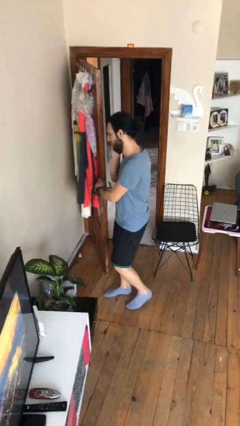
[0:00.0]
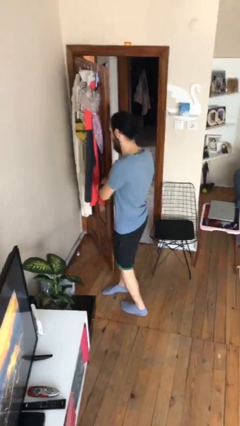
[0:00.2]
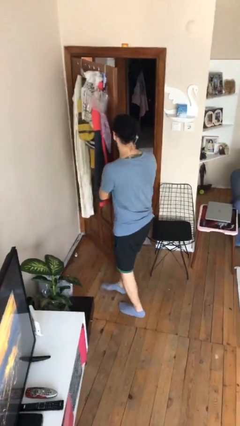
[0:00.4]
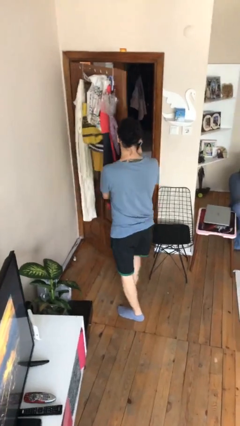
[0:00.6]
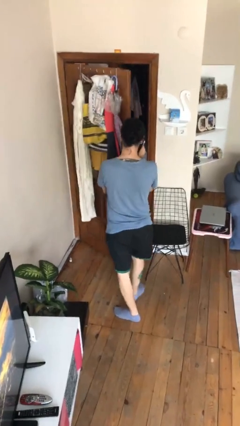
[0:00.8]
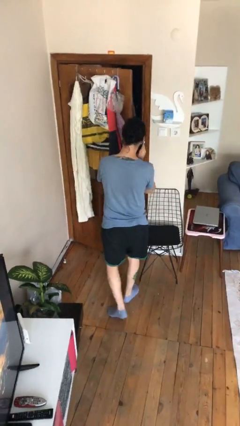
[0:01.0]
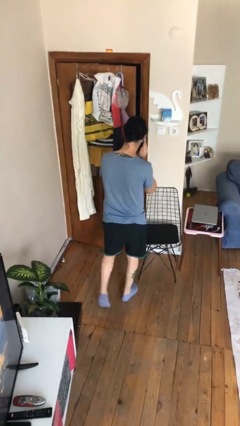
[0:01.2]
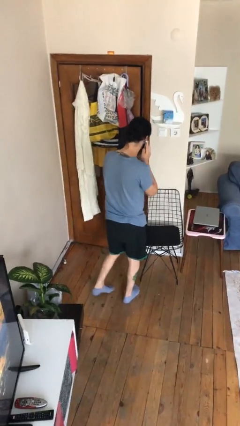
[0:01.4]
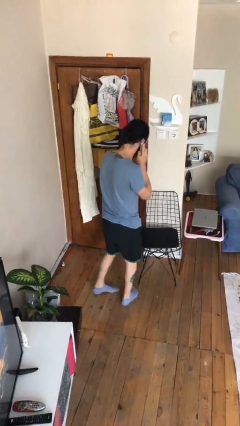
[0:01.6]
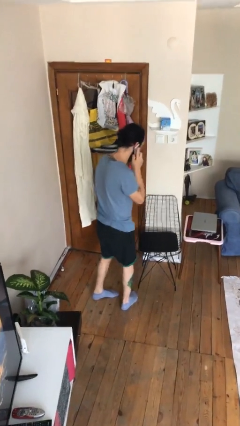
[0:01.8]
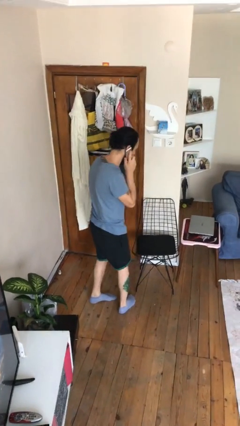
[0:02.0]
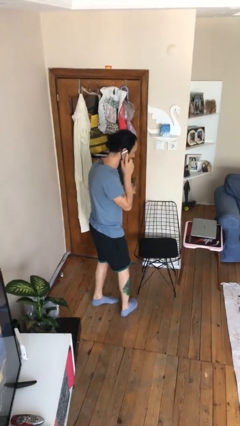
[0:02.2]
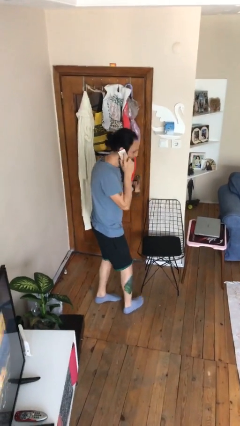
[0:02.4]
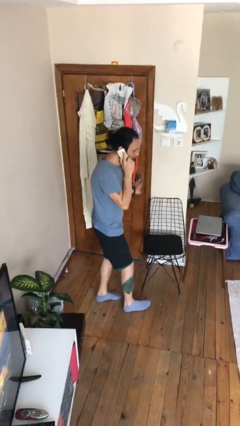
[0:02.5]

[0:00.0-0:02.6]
person closes facility door

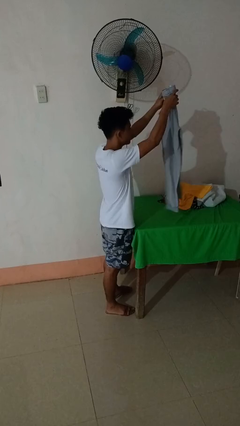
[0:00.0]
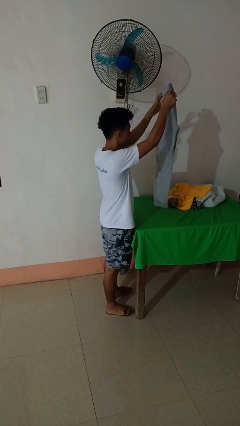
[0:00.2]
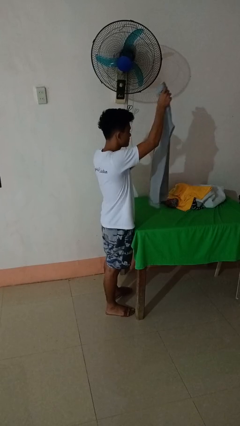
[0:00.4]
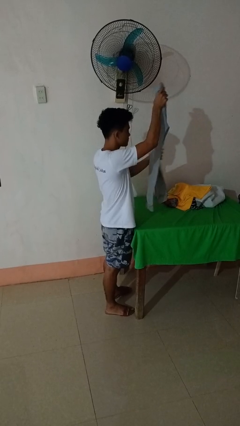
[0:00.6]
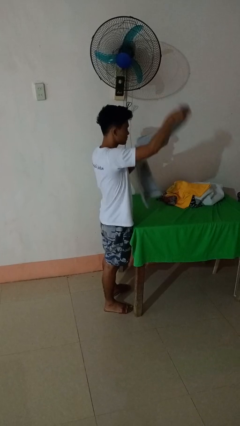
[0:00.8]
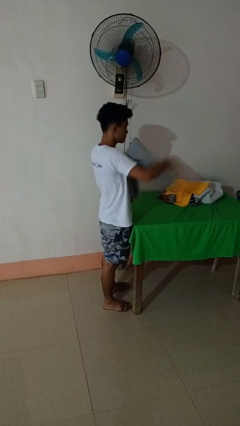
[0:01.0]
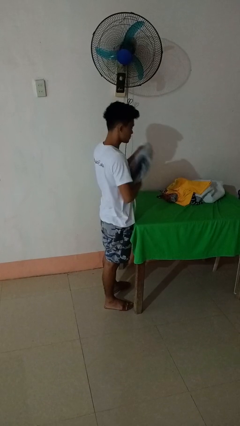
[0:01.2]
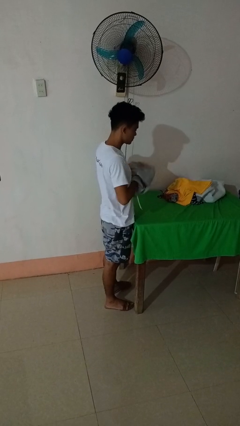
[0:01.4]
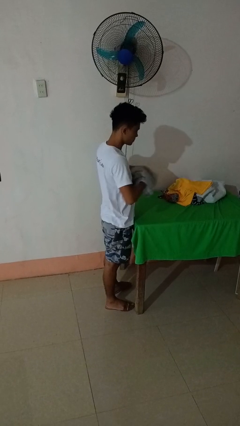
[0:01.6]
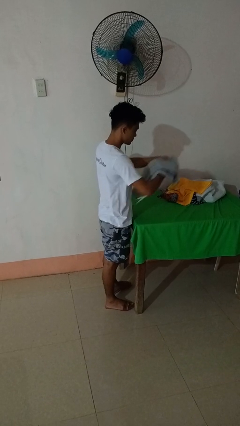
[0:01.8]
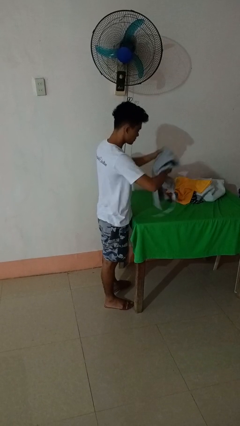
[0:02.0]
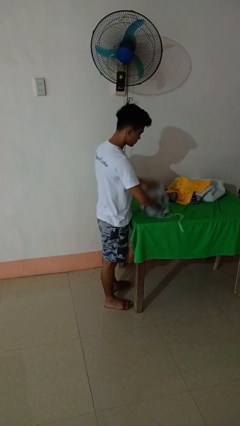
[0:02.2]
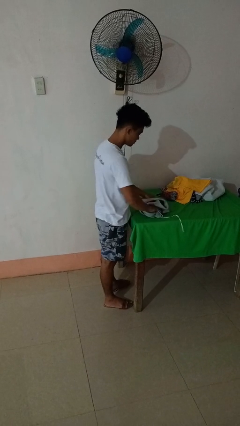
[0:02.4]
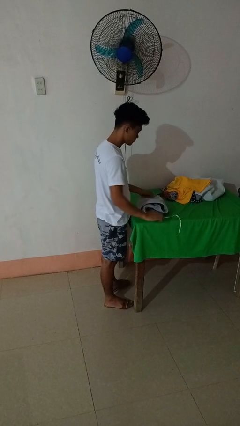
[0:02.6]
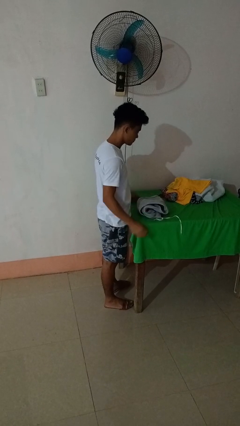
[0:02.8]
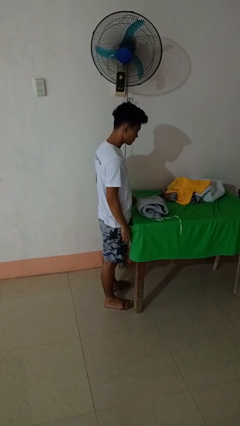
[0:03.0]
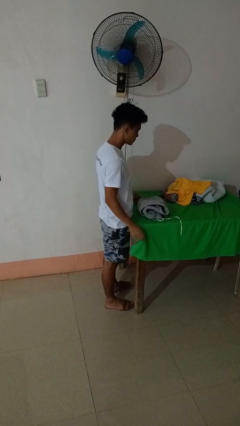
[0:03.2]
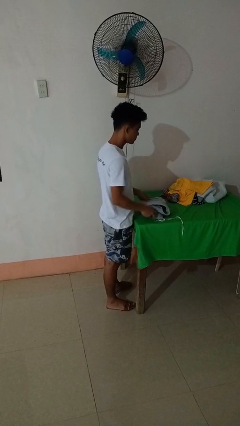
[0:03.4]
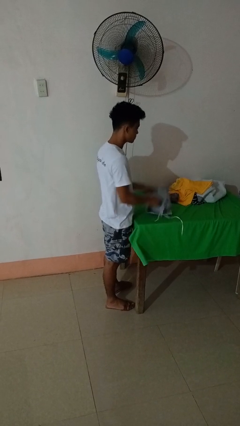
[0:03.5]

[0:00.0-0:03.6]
person folds pants

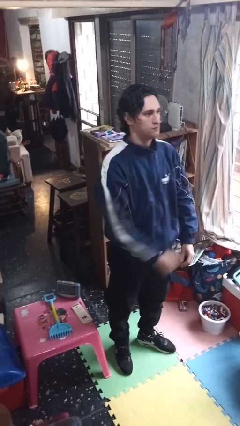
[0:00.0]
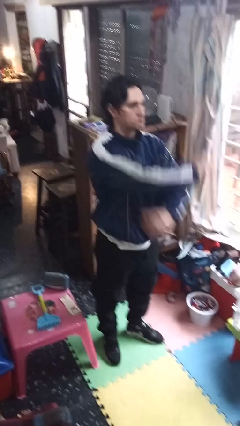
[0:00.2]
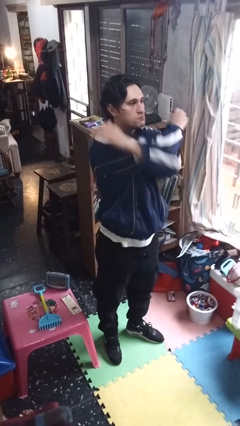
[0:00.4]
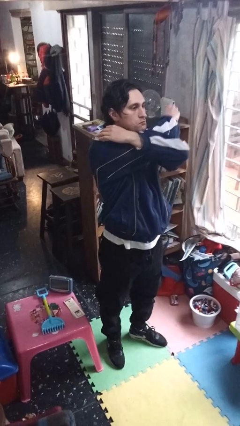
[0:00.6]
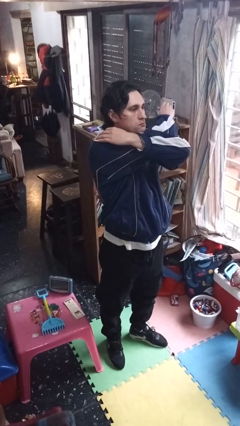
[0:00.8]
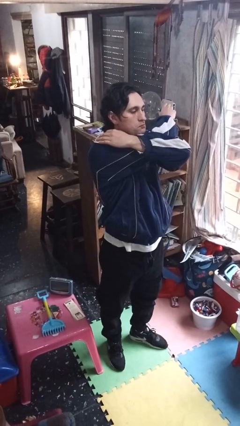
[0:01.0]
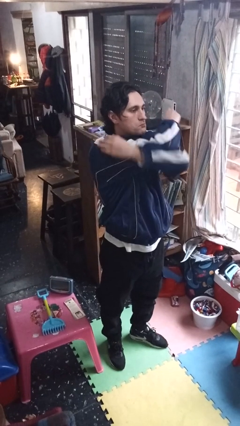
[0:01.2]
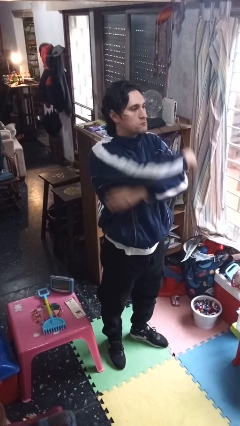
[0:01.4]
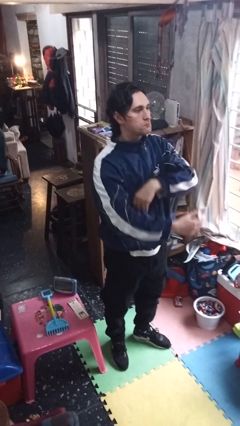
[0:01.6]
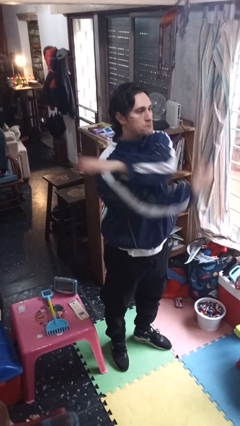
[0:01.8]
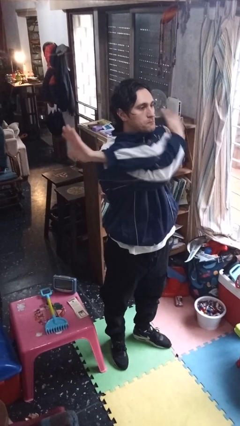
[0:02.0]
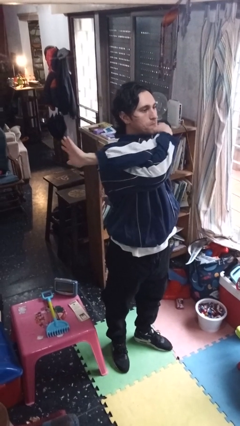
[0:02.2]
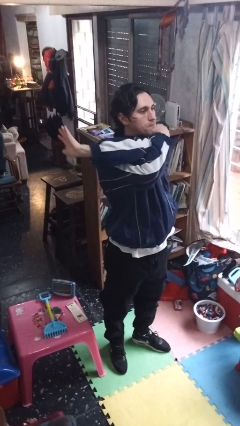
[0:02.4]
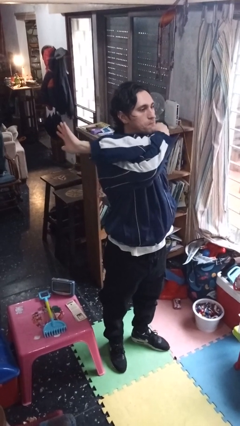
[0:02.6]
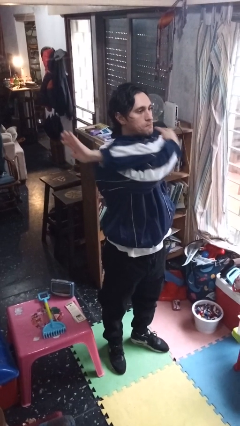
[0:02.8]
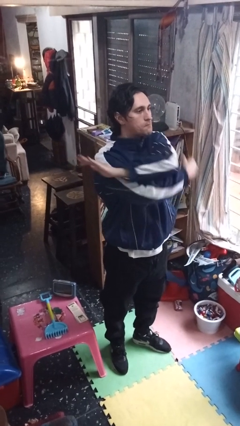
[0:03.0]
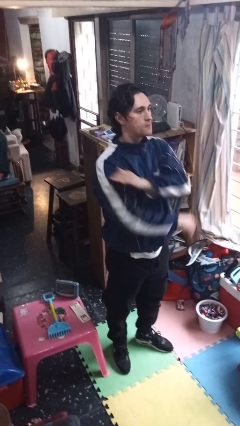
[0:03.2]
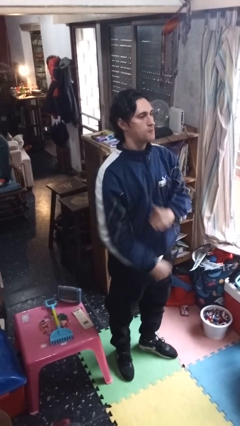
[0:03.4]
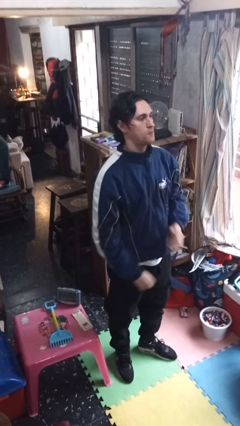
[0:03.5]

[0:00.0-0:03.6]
person stretches arms to side

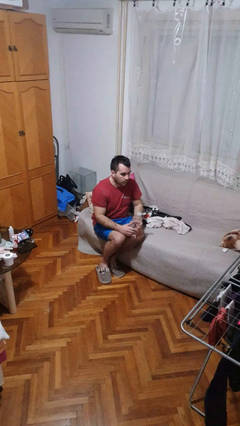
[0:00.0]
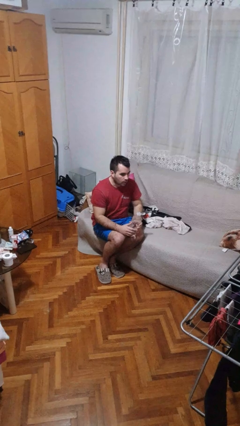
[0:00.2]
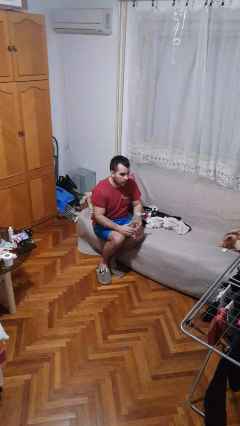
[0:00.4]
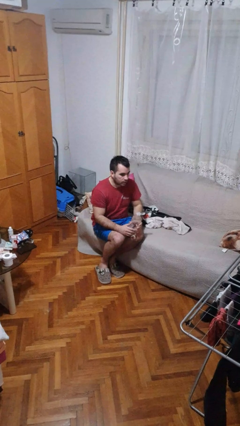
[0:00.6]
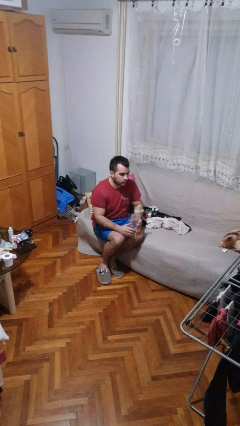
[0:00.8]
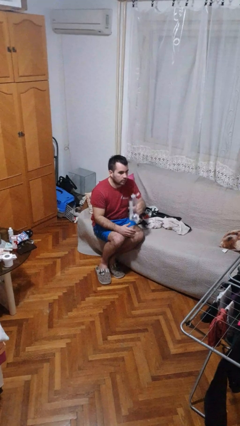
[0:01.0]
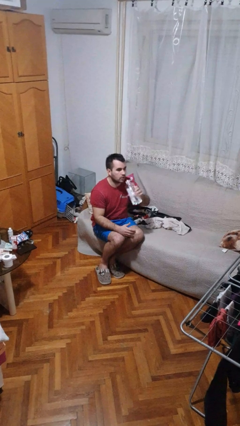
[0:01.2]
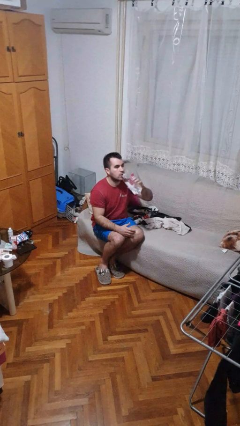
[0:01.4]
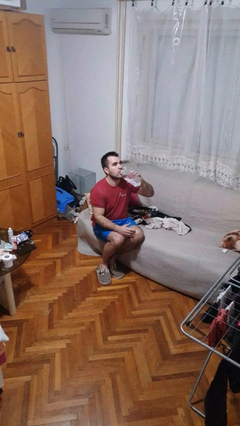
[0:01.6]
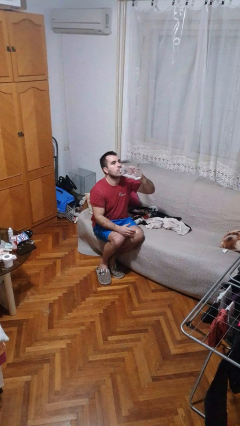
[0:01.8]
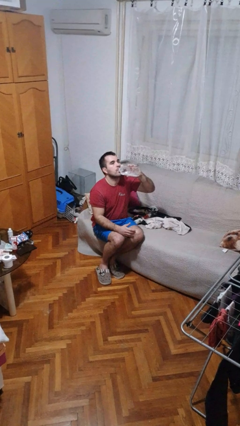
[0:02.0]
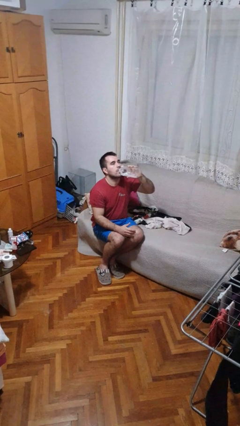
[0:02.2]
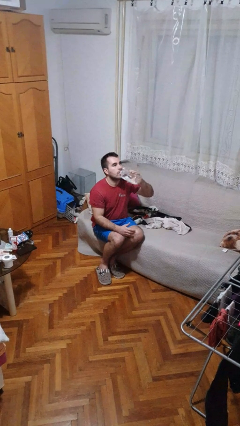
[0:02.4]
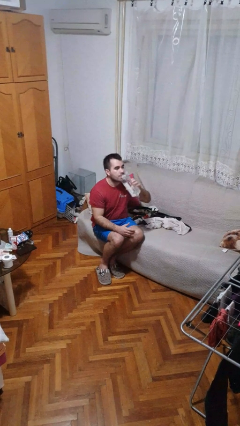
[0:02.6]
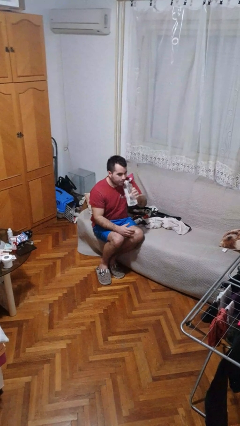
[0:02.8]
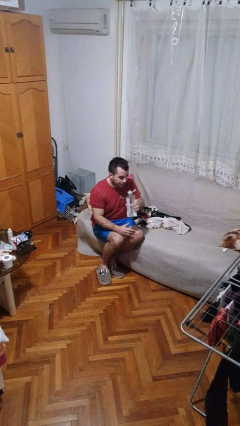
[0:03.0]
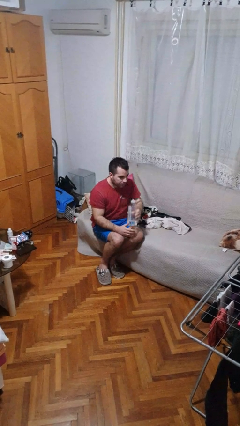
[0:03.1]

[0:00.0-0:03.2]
person drinks from bottle

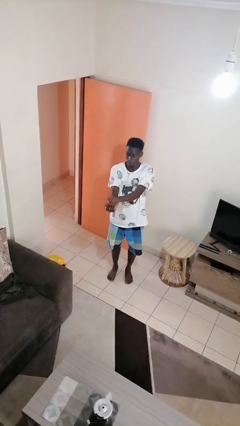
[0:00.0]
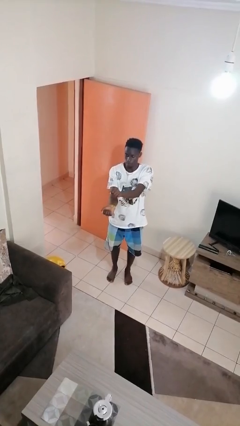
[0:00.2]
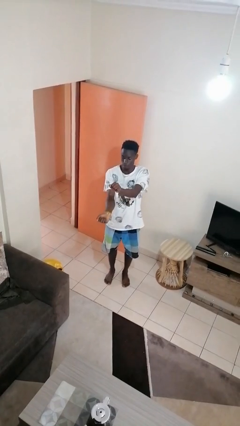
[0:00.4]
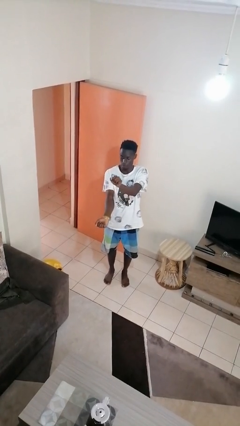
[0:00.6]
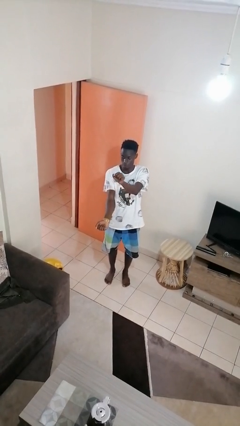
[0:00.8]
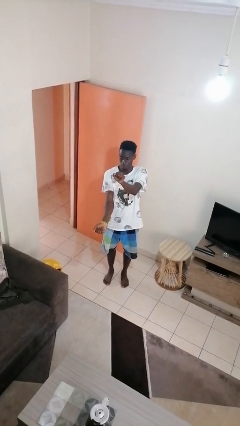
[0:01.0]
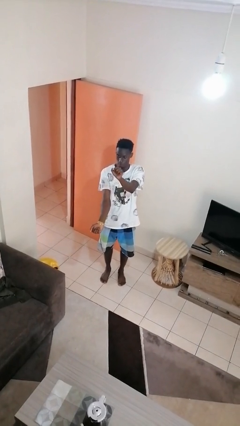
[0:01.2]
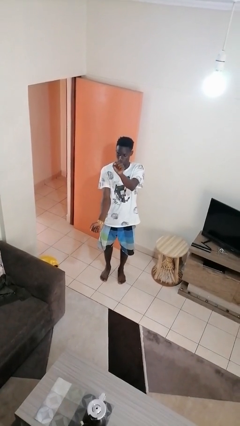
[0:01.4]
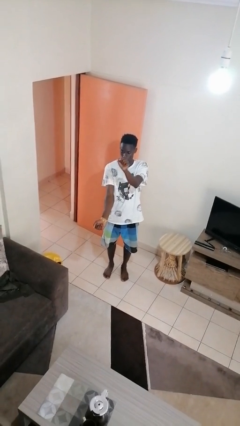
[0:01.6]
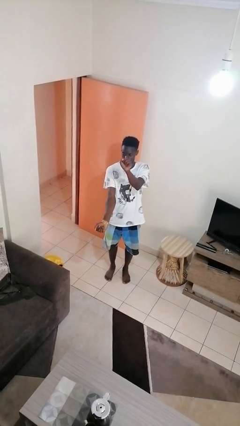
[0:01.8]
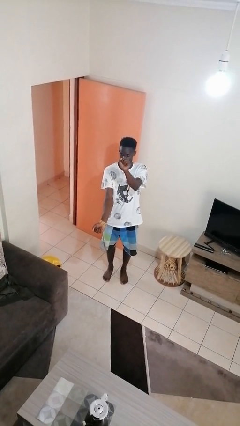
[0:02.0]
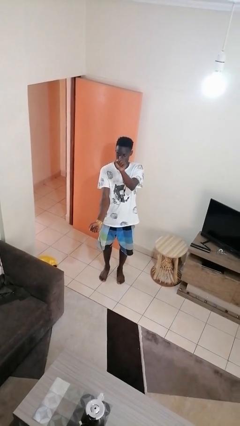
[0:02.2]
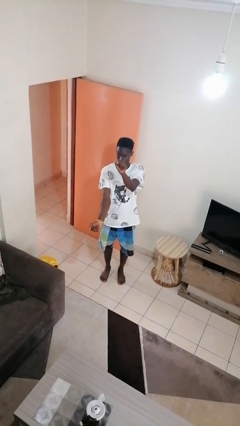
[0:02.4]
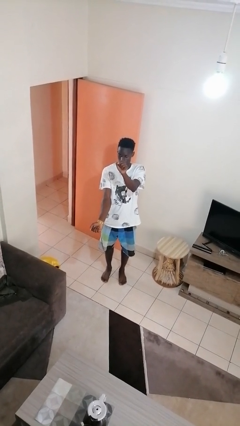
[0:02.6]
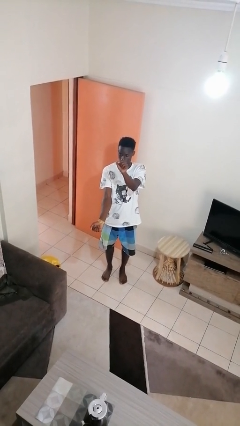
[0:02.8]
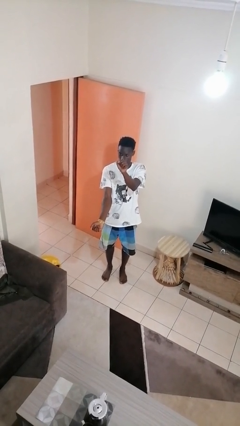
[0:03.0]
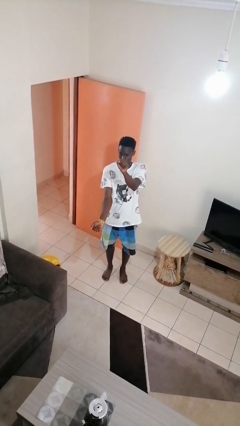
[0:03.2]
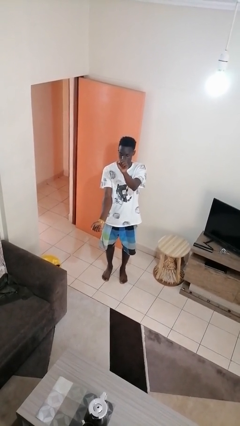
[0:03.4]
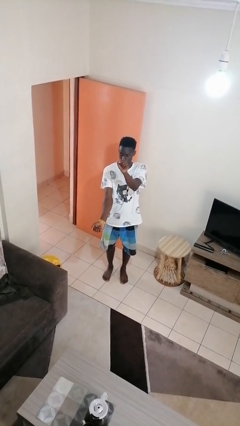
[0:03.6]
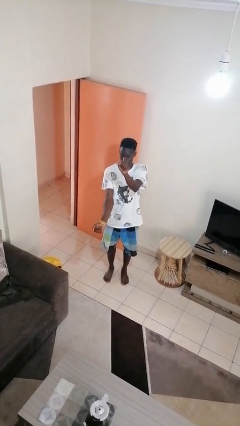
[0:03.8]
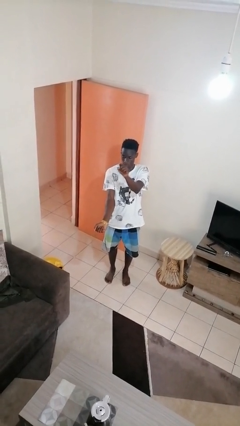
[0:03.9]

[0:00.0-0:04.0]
person gestures zoom in

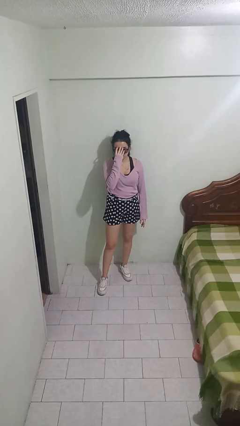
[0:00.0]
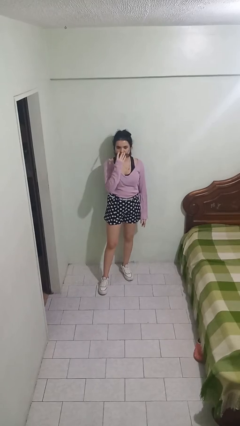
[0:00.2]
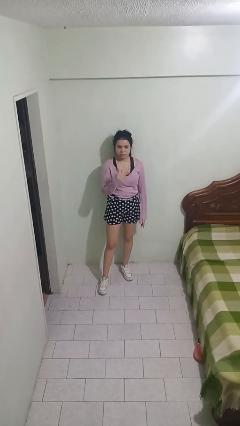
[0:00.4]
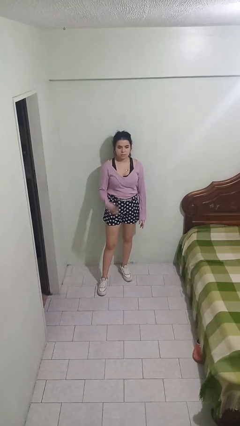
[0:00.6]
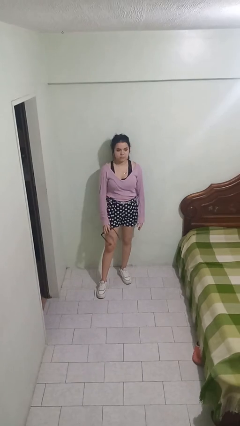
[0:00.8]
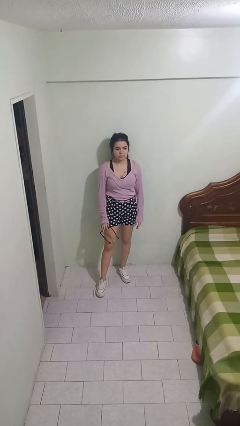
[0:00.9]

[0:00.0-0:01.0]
person takes off sunglasses
